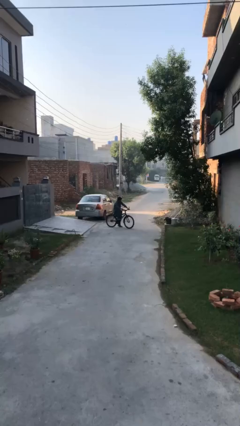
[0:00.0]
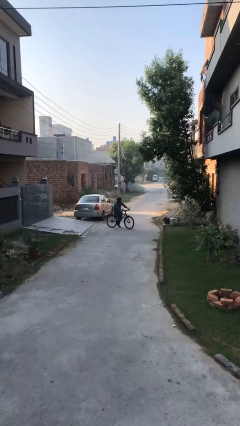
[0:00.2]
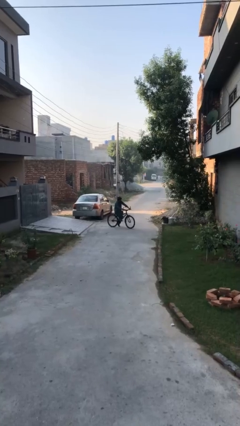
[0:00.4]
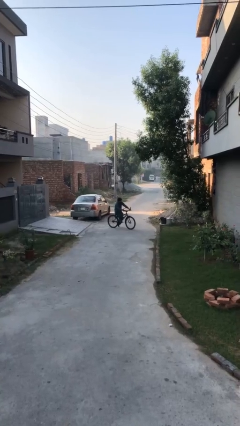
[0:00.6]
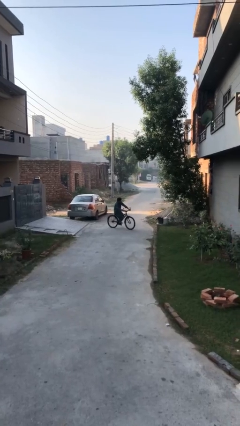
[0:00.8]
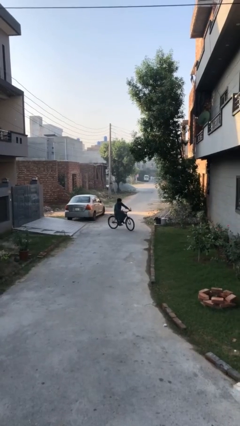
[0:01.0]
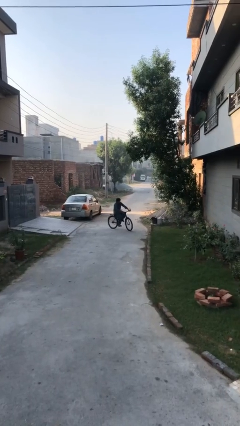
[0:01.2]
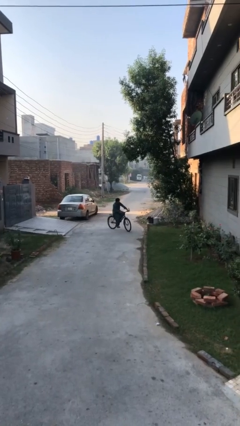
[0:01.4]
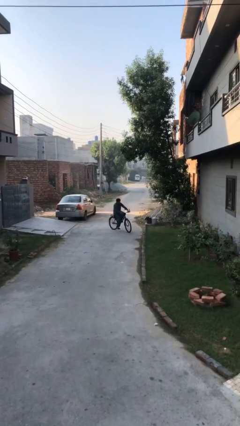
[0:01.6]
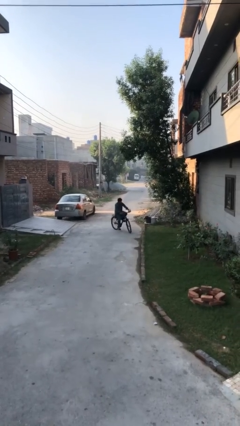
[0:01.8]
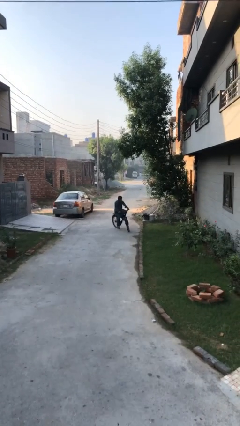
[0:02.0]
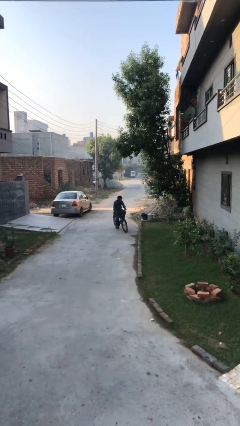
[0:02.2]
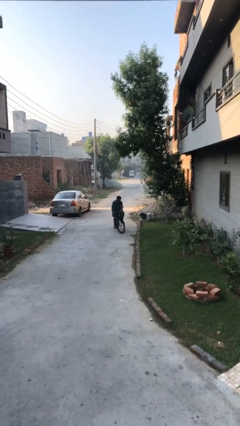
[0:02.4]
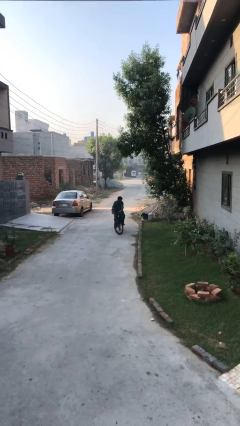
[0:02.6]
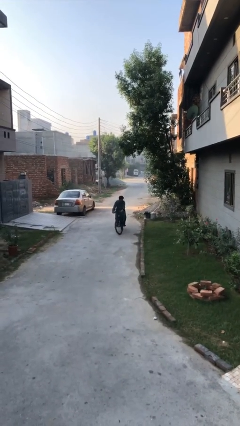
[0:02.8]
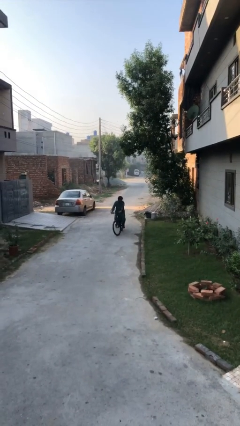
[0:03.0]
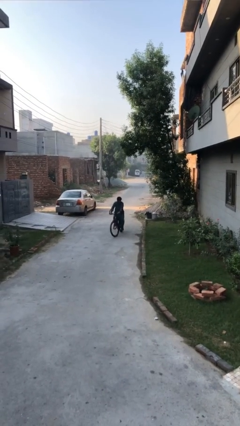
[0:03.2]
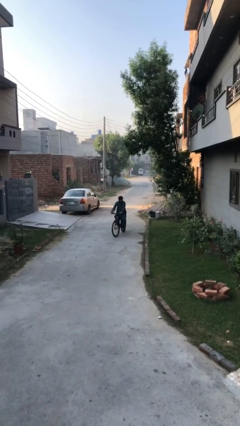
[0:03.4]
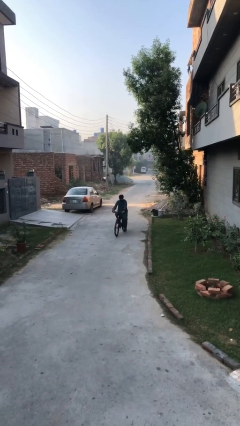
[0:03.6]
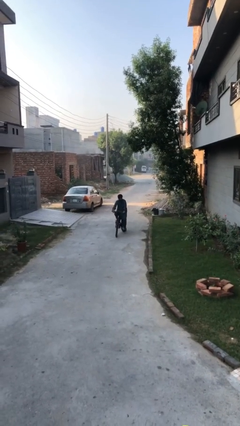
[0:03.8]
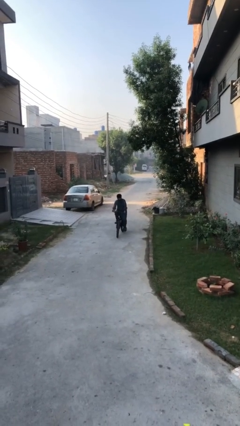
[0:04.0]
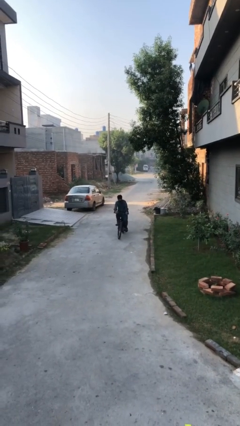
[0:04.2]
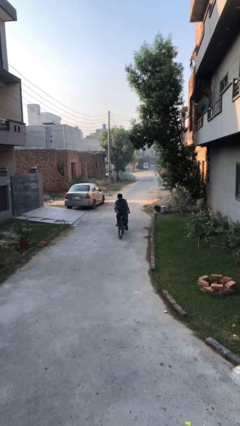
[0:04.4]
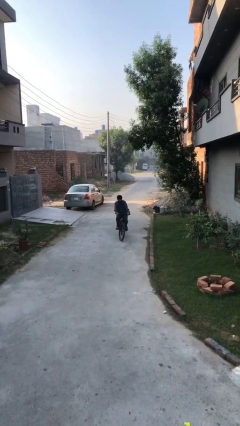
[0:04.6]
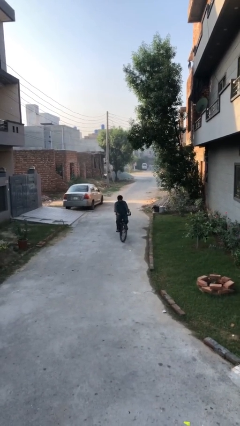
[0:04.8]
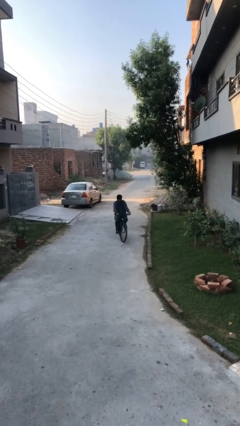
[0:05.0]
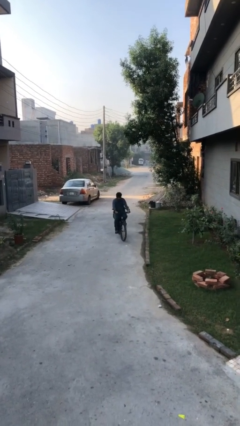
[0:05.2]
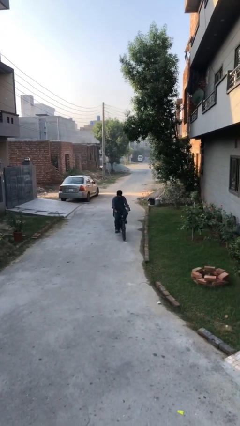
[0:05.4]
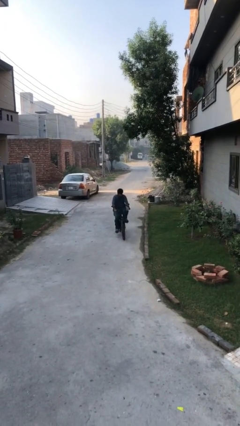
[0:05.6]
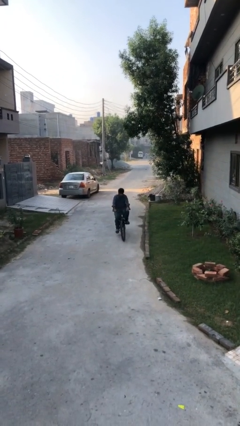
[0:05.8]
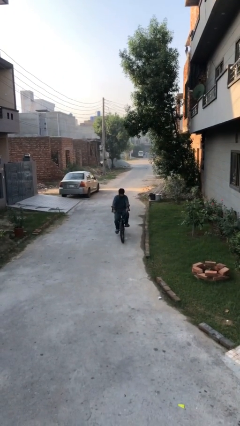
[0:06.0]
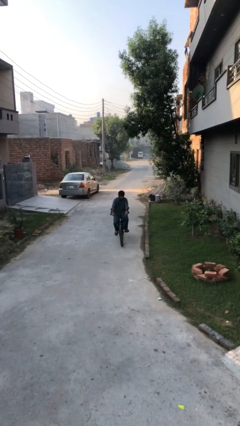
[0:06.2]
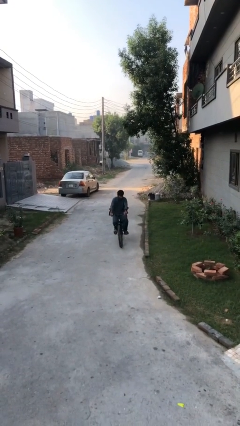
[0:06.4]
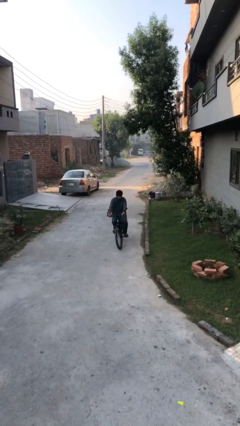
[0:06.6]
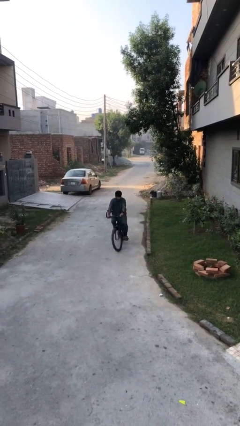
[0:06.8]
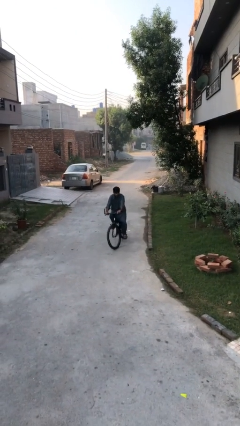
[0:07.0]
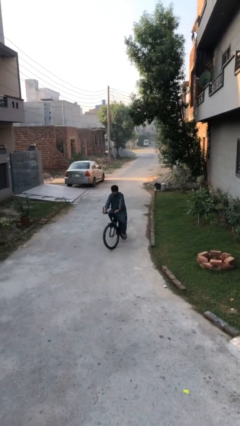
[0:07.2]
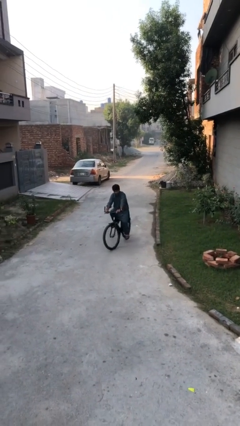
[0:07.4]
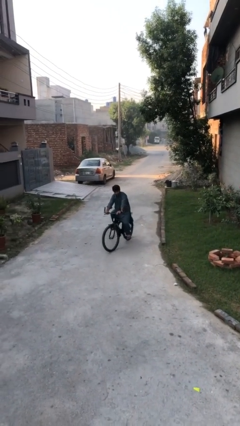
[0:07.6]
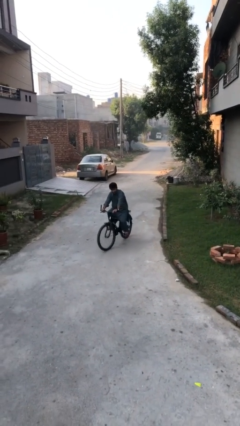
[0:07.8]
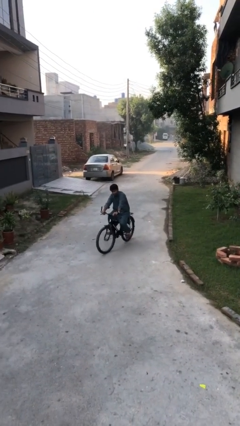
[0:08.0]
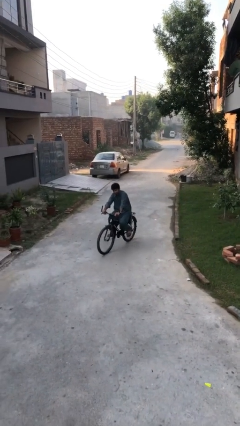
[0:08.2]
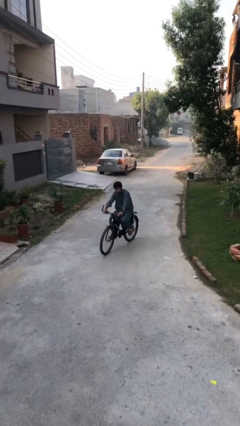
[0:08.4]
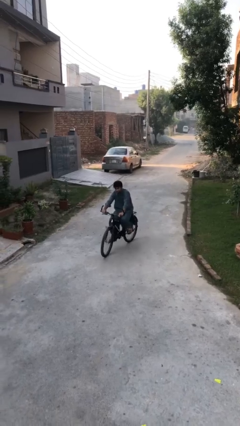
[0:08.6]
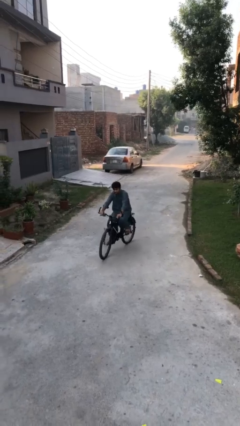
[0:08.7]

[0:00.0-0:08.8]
person rides bicycle

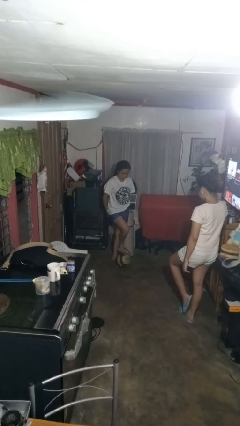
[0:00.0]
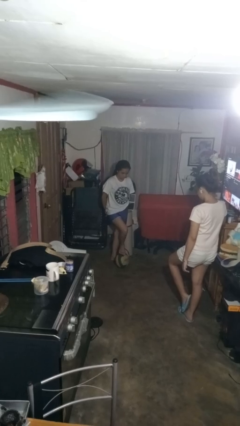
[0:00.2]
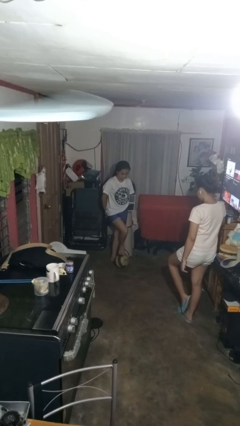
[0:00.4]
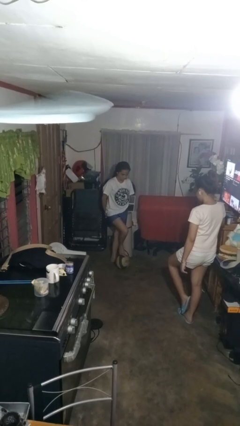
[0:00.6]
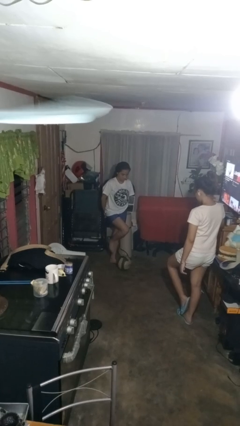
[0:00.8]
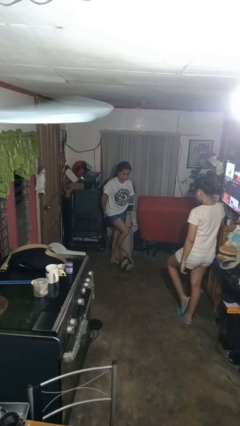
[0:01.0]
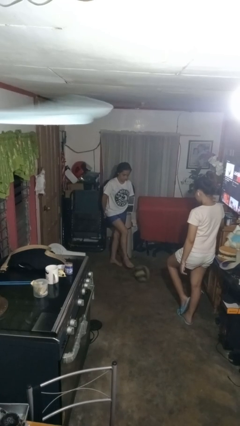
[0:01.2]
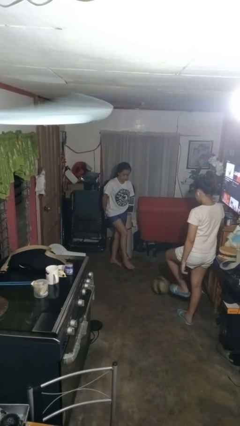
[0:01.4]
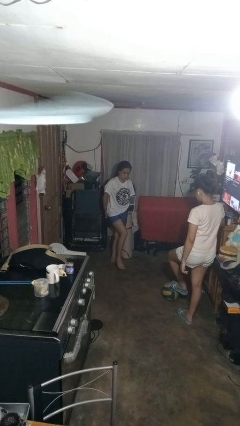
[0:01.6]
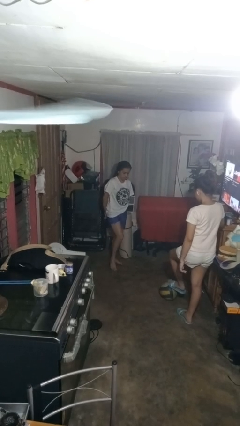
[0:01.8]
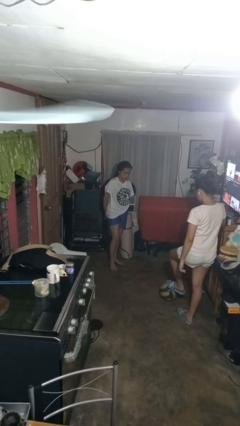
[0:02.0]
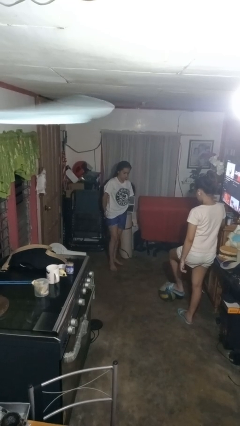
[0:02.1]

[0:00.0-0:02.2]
person kicks object to person

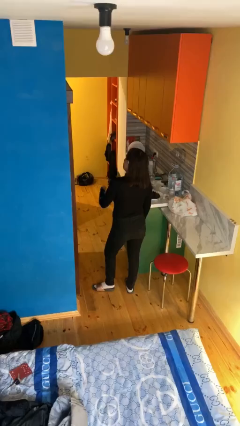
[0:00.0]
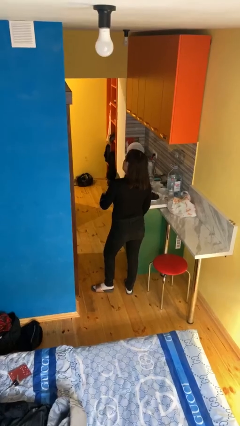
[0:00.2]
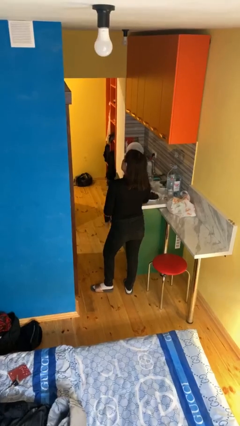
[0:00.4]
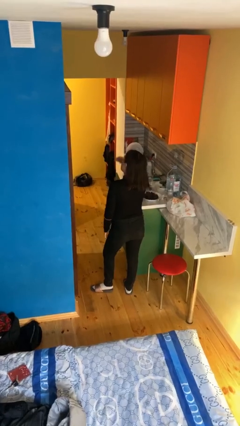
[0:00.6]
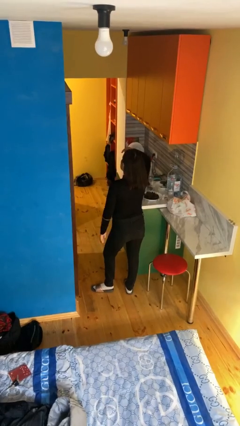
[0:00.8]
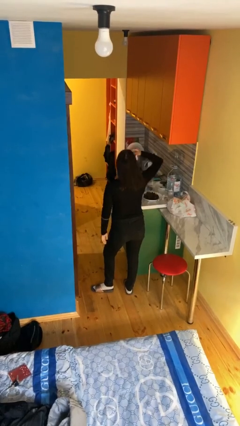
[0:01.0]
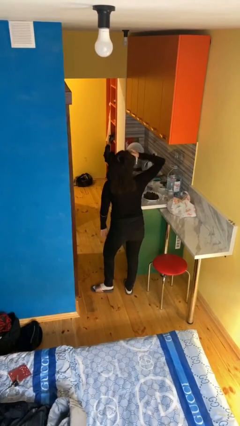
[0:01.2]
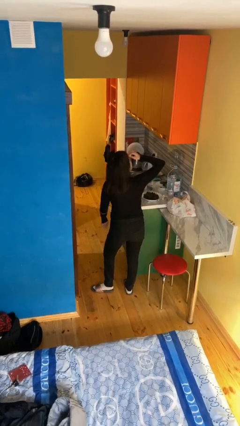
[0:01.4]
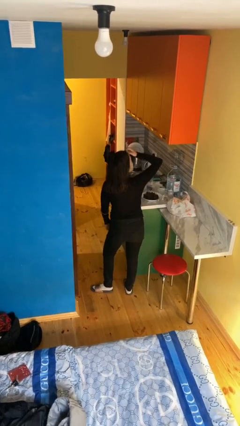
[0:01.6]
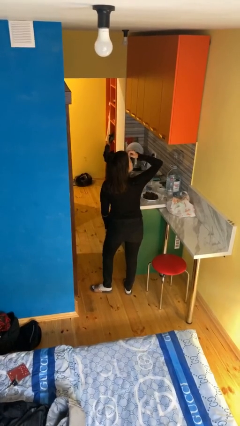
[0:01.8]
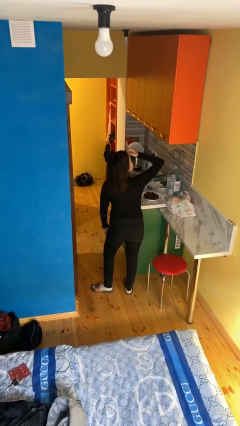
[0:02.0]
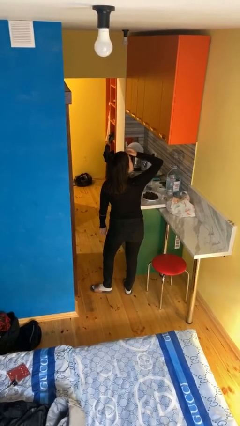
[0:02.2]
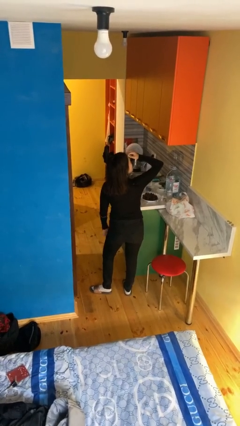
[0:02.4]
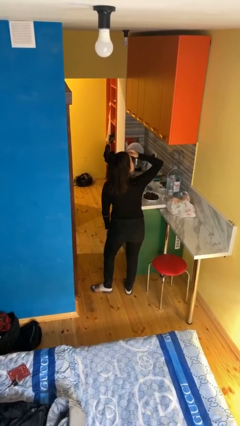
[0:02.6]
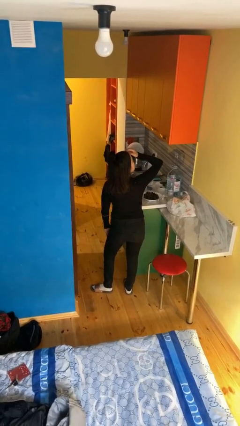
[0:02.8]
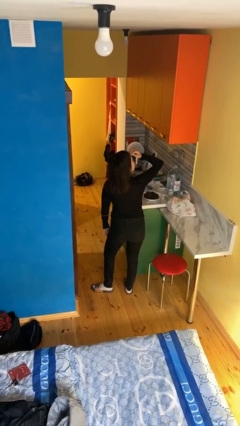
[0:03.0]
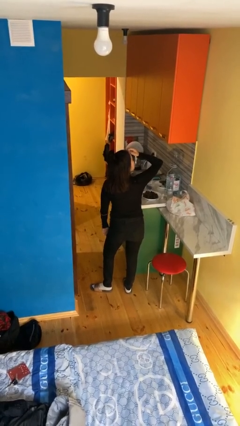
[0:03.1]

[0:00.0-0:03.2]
person scratches face

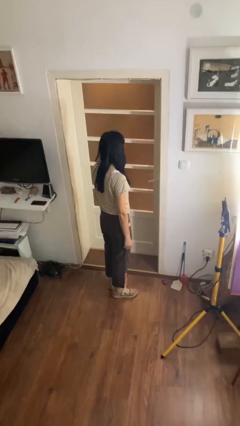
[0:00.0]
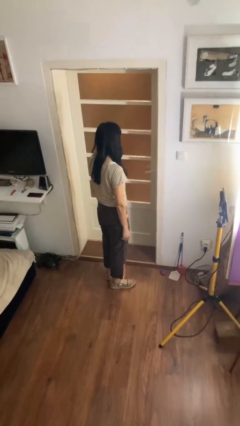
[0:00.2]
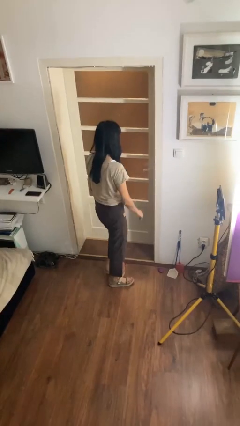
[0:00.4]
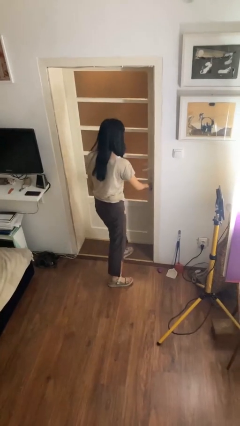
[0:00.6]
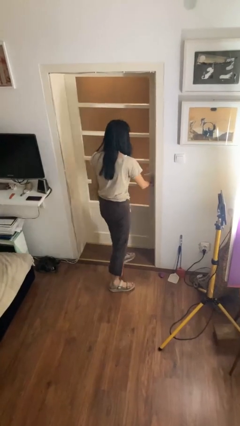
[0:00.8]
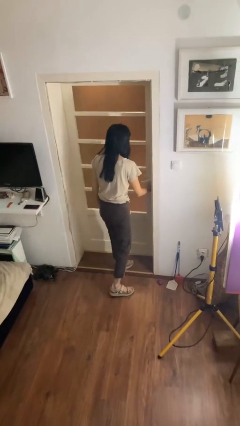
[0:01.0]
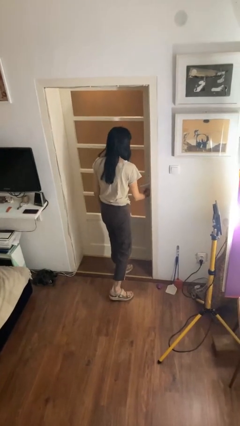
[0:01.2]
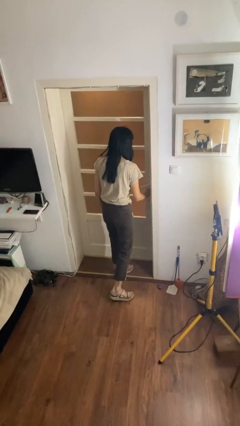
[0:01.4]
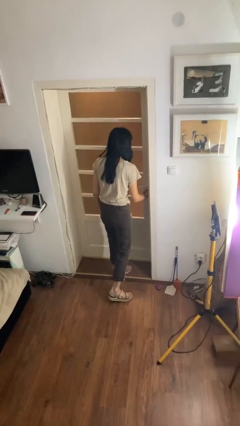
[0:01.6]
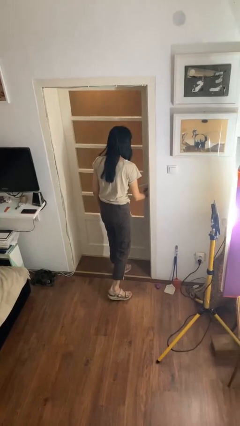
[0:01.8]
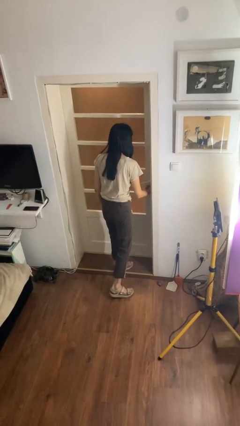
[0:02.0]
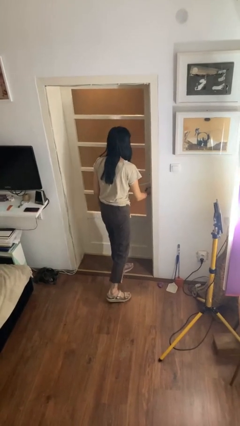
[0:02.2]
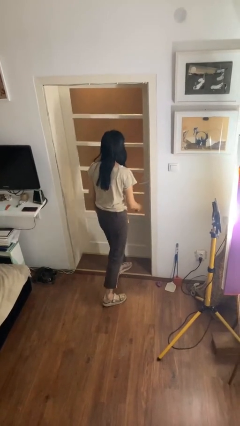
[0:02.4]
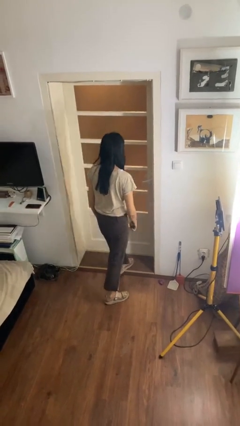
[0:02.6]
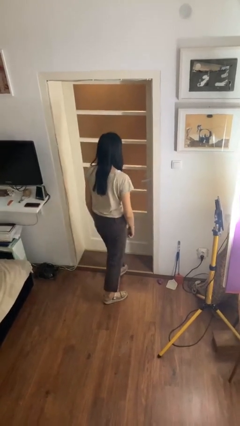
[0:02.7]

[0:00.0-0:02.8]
person locks door with keys

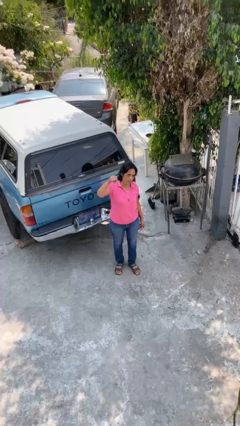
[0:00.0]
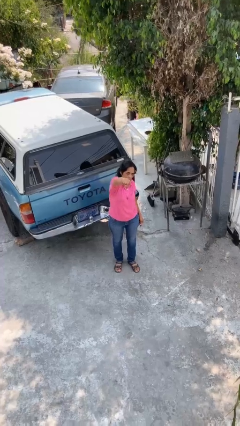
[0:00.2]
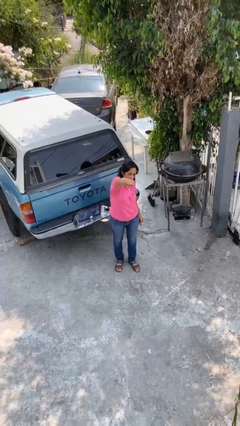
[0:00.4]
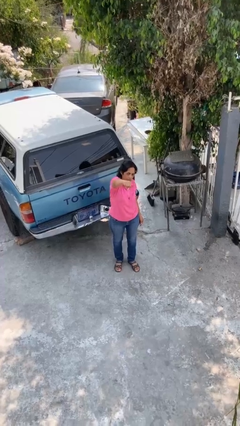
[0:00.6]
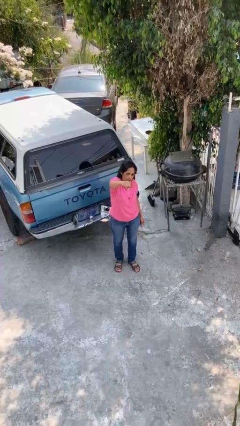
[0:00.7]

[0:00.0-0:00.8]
person punches
